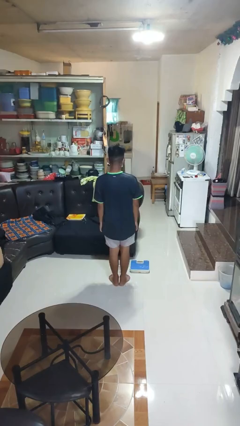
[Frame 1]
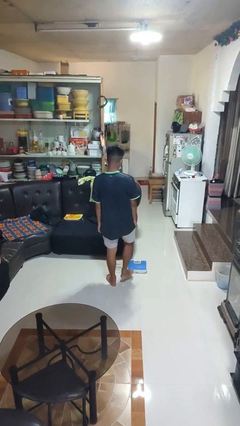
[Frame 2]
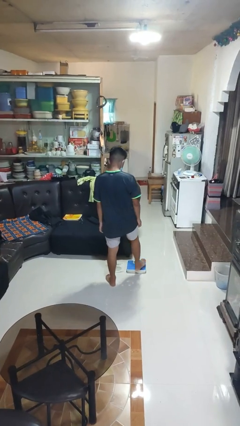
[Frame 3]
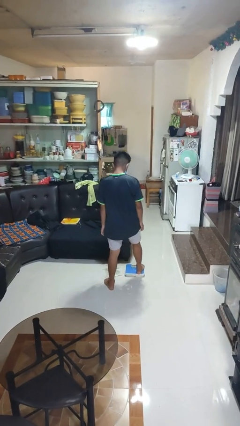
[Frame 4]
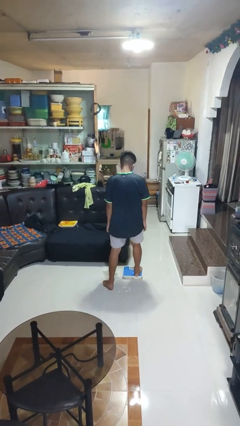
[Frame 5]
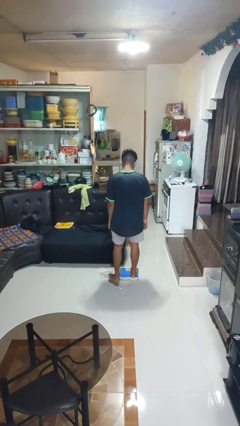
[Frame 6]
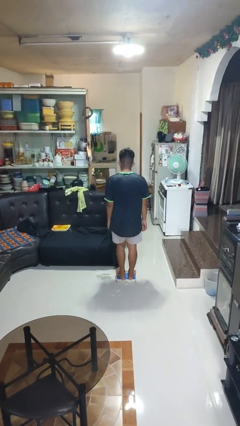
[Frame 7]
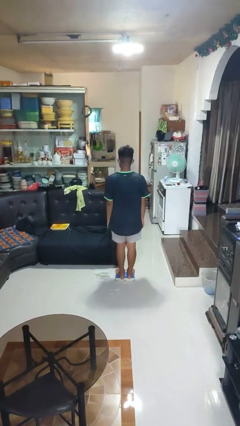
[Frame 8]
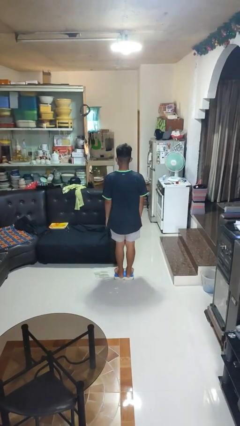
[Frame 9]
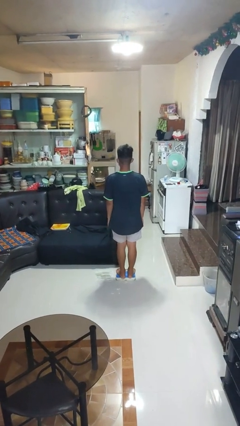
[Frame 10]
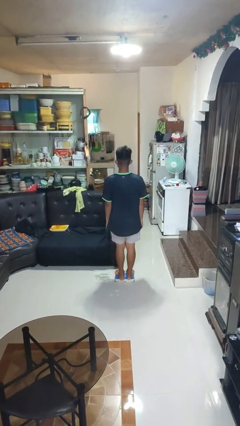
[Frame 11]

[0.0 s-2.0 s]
person uses bodyweight scale

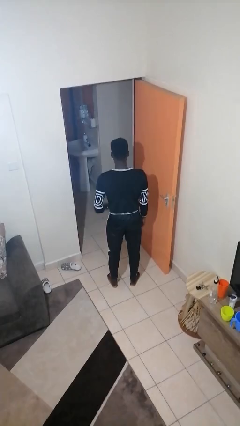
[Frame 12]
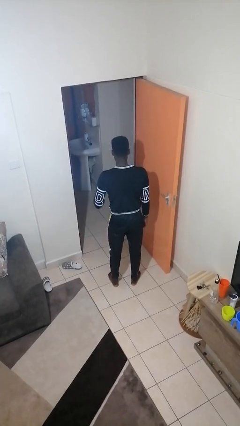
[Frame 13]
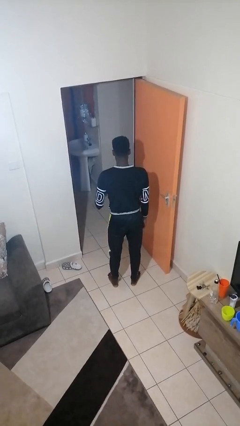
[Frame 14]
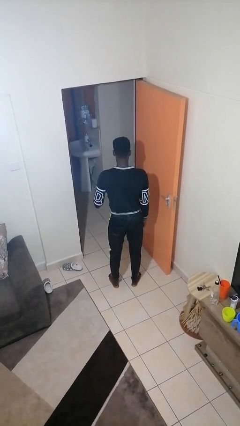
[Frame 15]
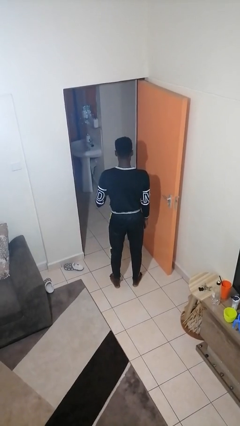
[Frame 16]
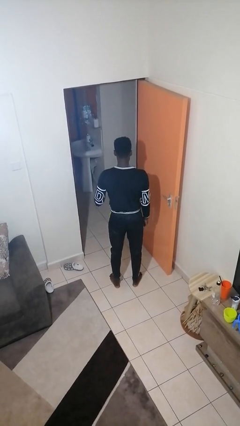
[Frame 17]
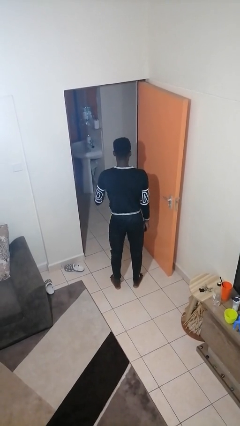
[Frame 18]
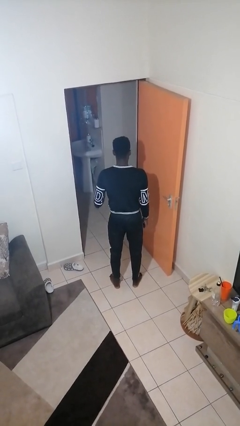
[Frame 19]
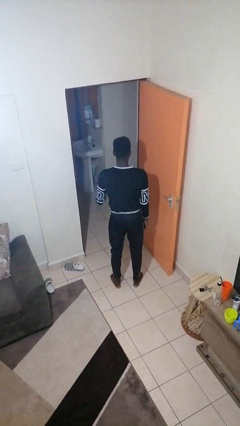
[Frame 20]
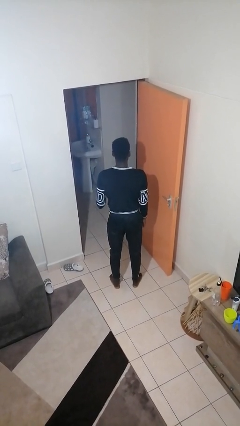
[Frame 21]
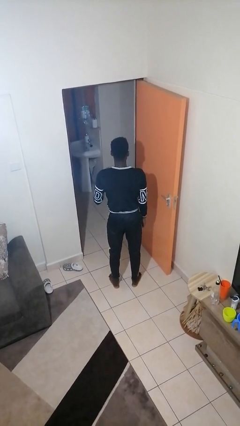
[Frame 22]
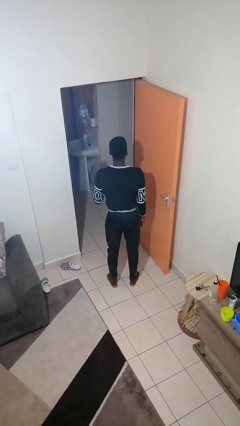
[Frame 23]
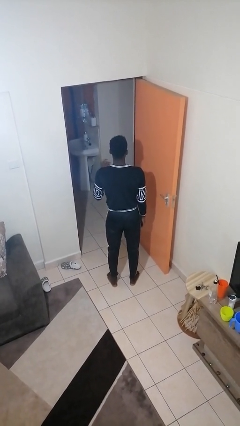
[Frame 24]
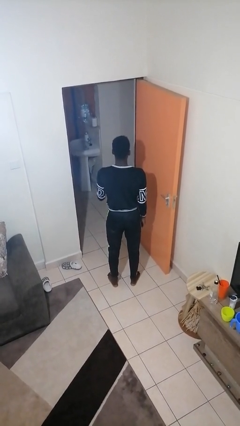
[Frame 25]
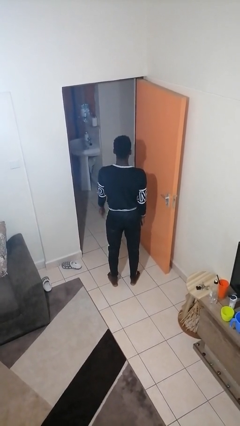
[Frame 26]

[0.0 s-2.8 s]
person snaps fingers

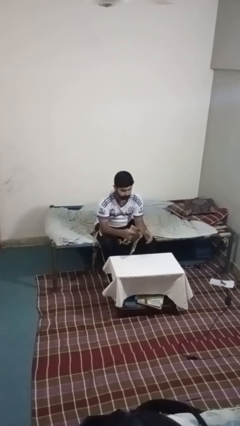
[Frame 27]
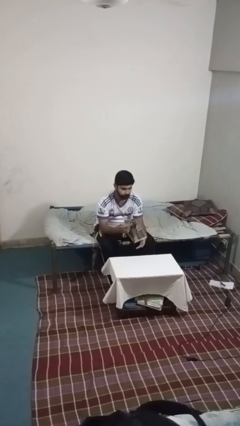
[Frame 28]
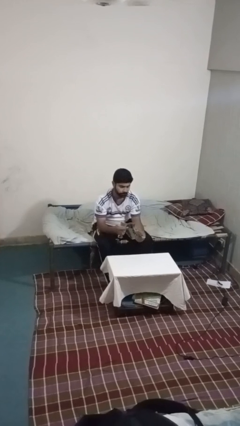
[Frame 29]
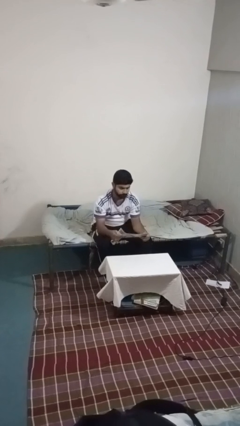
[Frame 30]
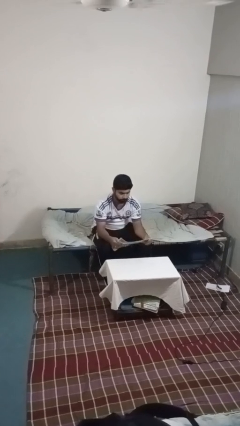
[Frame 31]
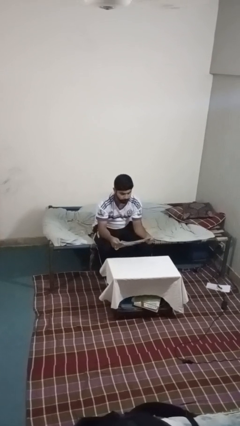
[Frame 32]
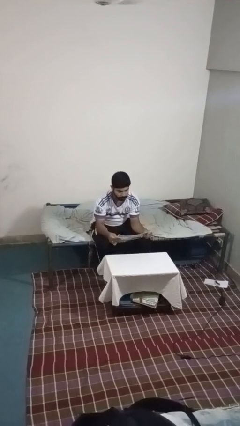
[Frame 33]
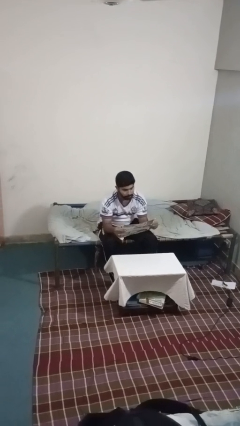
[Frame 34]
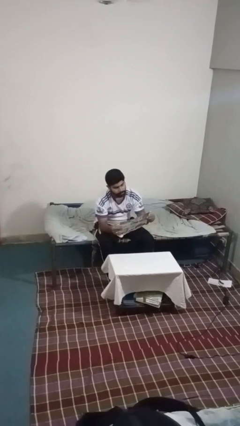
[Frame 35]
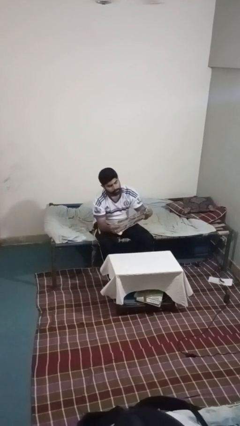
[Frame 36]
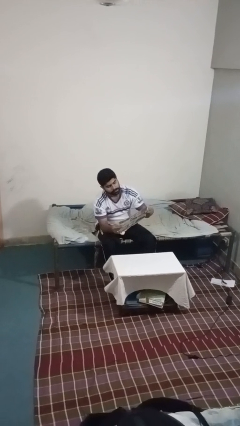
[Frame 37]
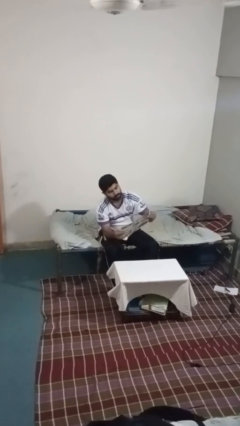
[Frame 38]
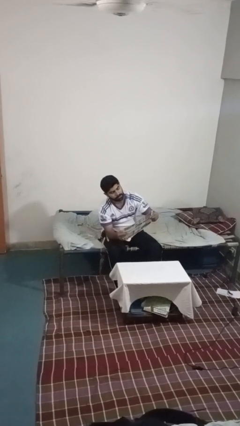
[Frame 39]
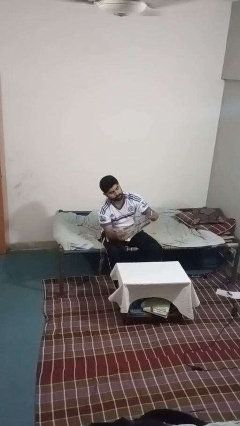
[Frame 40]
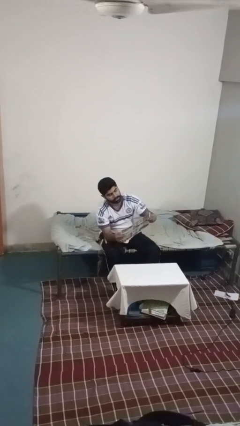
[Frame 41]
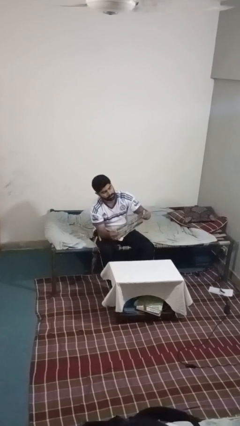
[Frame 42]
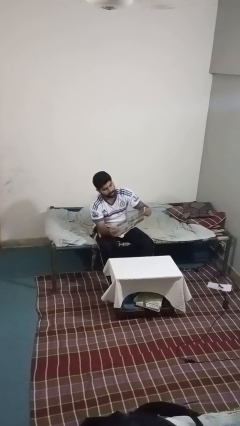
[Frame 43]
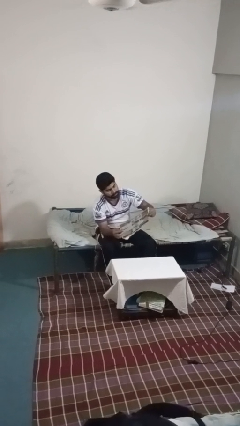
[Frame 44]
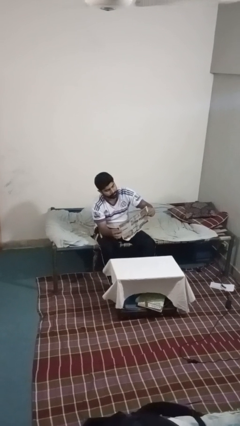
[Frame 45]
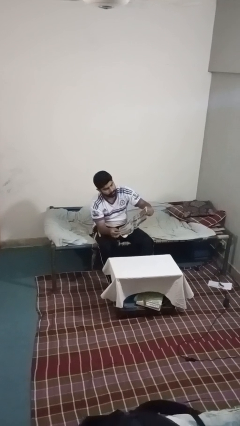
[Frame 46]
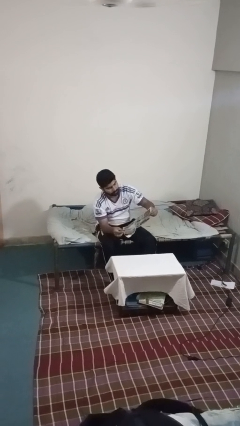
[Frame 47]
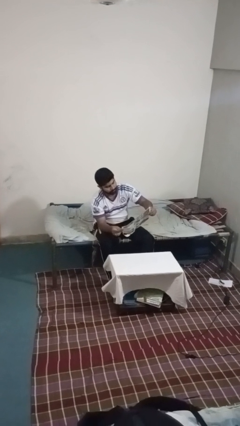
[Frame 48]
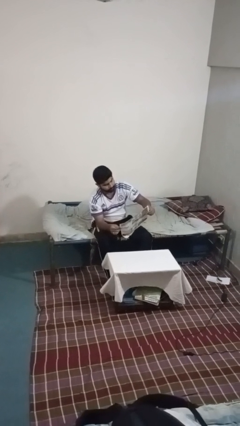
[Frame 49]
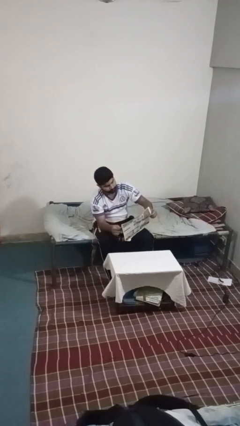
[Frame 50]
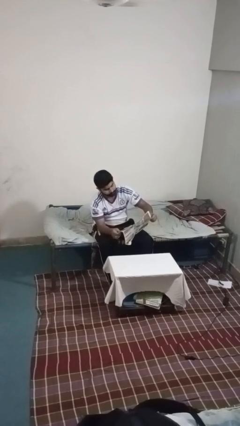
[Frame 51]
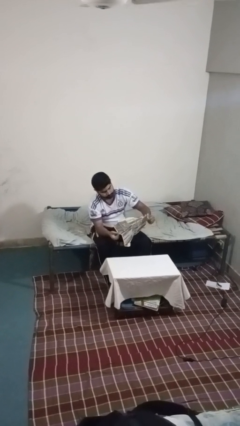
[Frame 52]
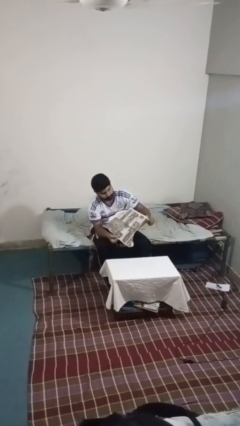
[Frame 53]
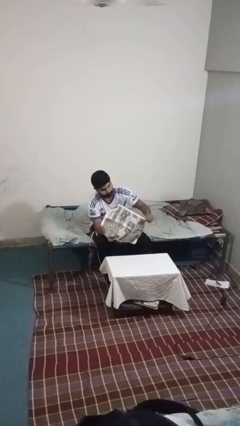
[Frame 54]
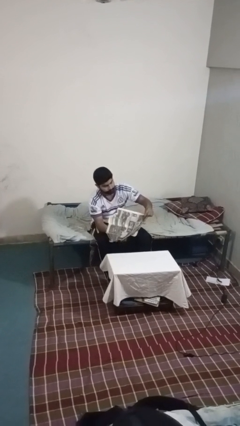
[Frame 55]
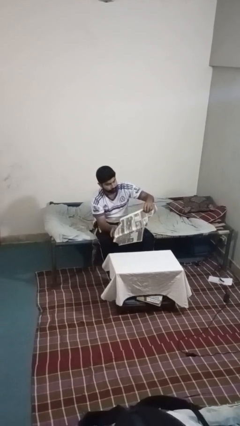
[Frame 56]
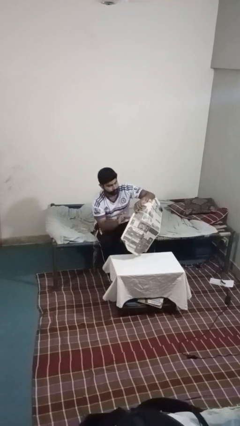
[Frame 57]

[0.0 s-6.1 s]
person reads newspaper

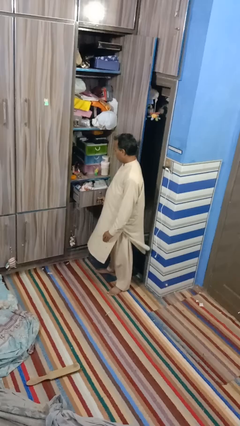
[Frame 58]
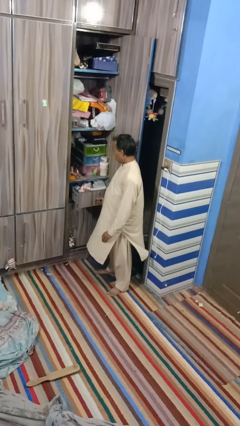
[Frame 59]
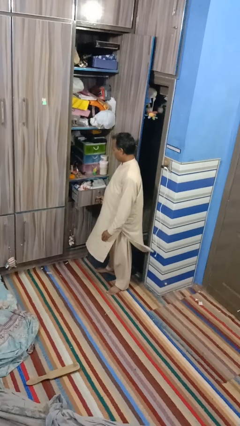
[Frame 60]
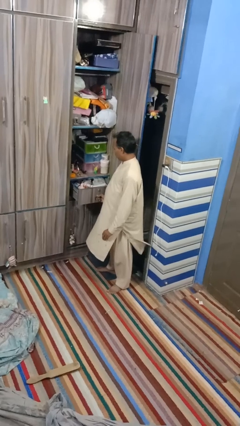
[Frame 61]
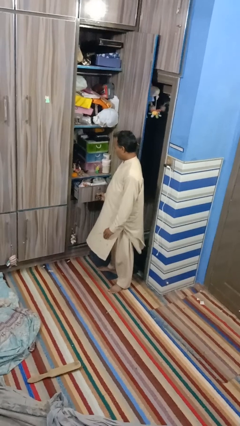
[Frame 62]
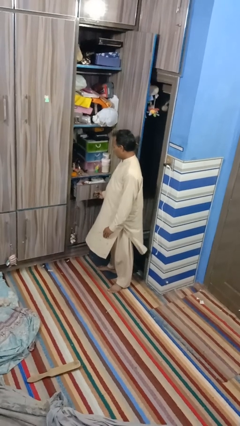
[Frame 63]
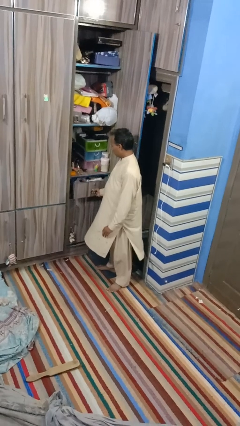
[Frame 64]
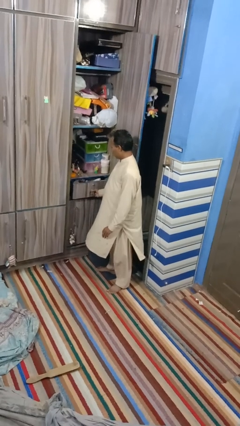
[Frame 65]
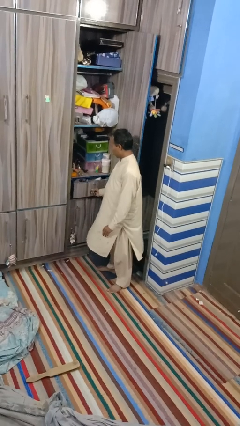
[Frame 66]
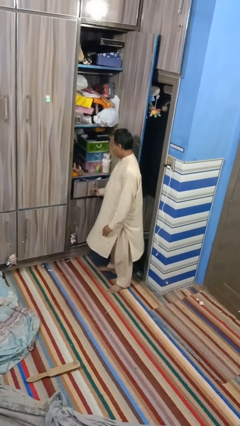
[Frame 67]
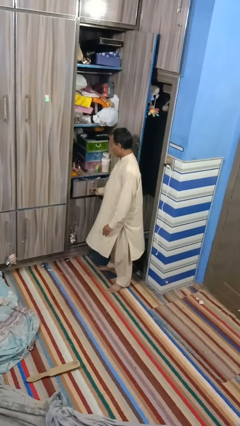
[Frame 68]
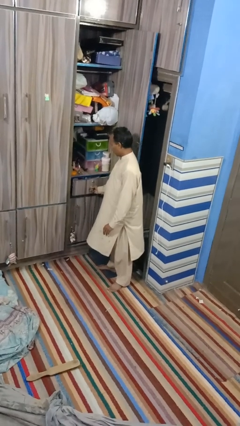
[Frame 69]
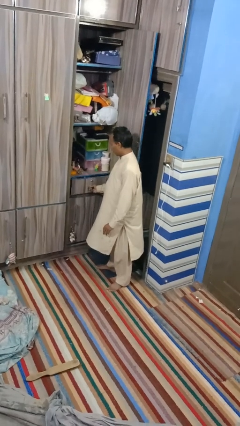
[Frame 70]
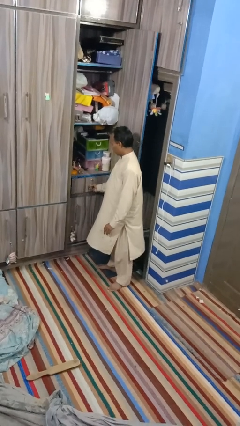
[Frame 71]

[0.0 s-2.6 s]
person closes dresser drawer

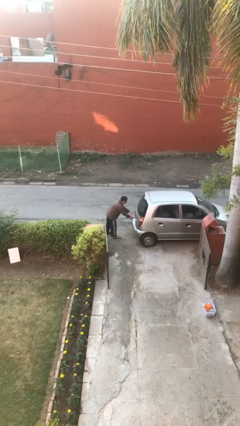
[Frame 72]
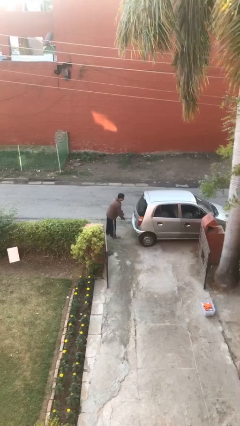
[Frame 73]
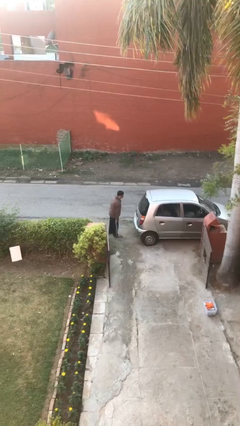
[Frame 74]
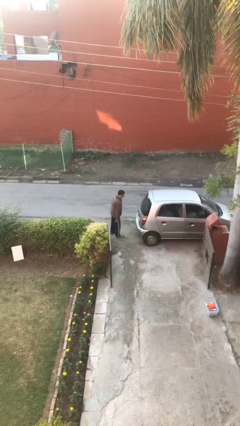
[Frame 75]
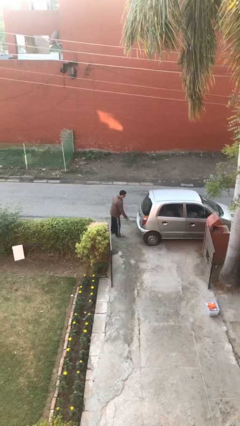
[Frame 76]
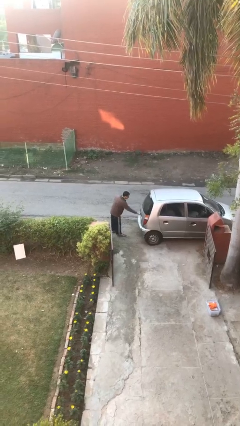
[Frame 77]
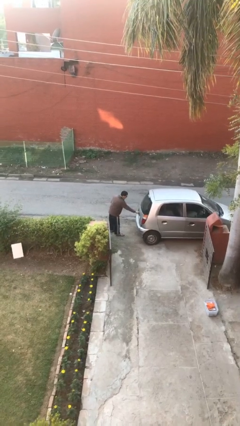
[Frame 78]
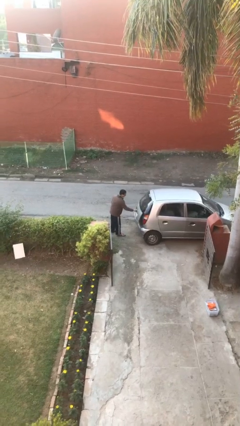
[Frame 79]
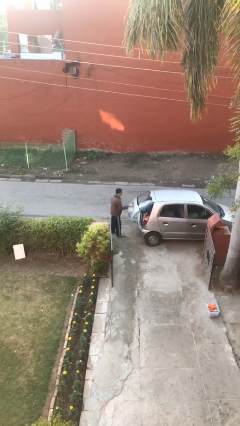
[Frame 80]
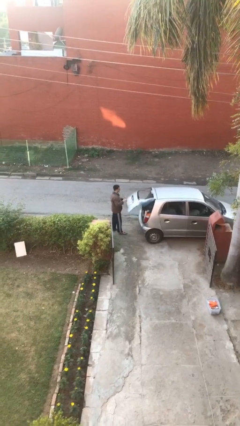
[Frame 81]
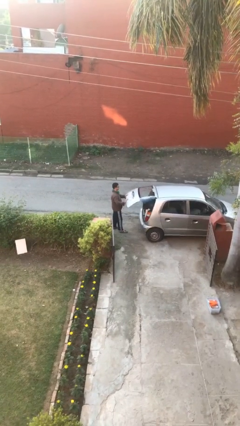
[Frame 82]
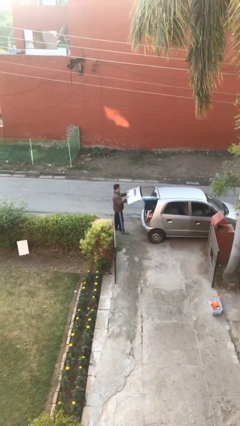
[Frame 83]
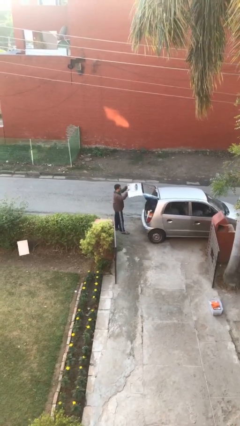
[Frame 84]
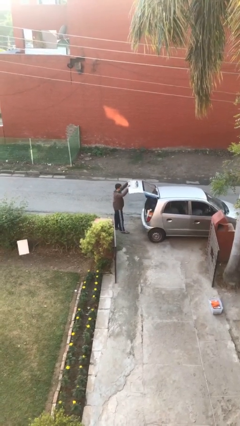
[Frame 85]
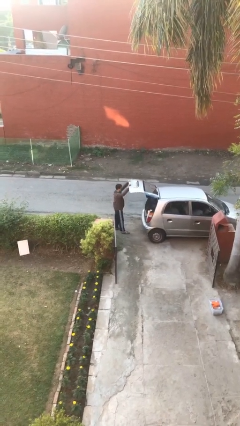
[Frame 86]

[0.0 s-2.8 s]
person opens car trunk

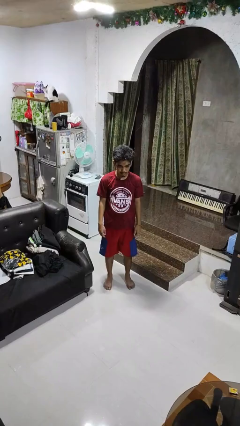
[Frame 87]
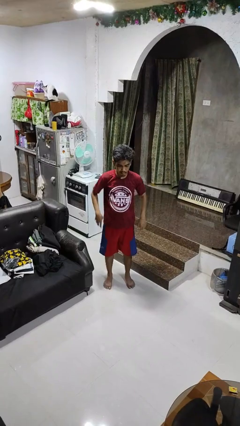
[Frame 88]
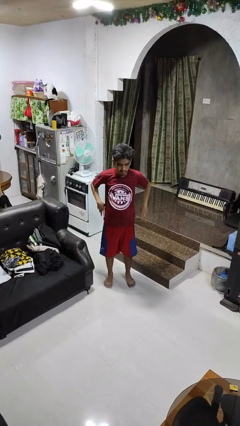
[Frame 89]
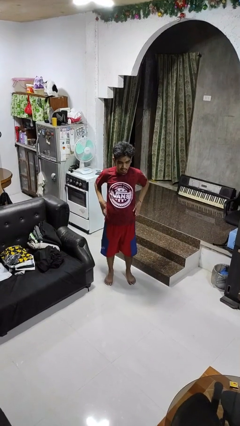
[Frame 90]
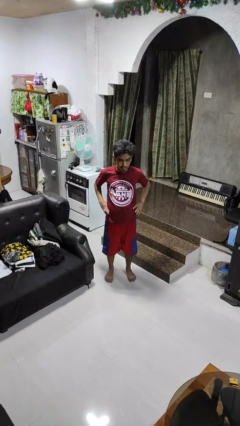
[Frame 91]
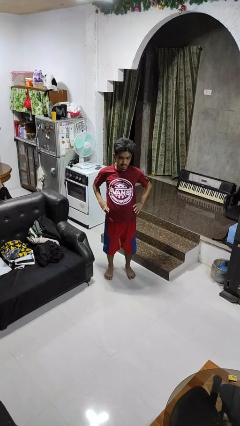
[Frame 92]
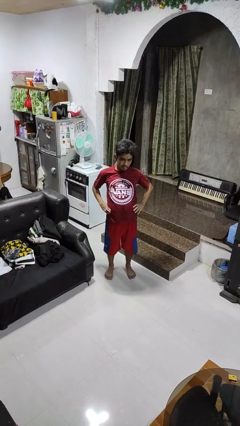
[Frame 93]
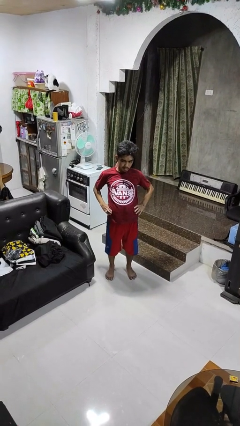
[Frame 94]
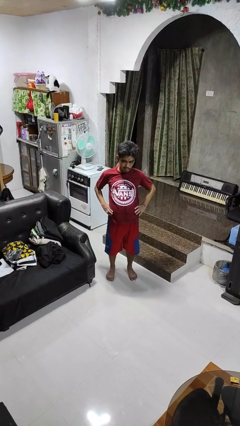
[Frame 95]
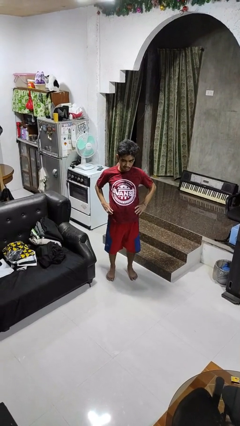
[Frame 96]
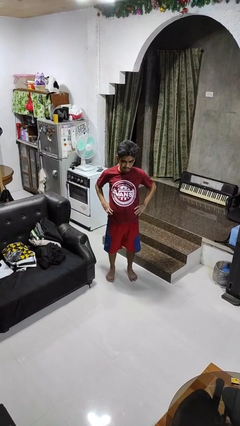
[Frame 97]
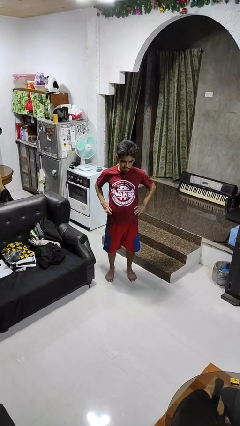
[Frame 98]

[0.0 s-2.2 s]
person stretches back
